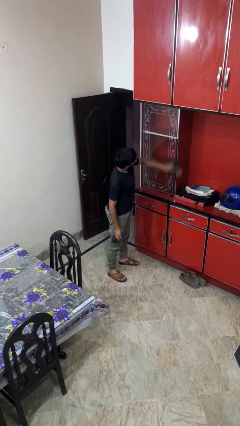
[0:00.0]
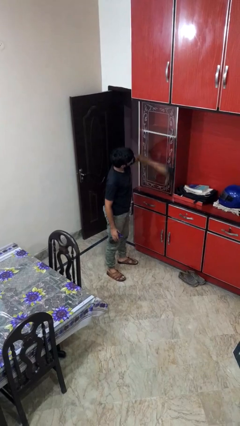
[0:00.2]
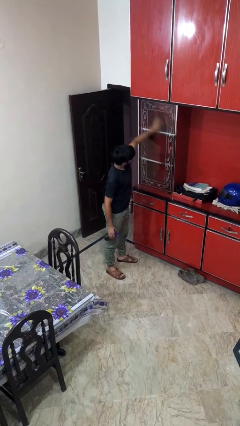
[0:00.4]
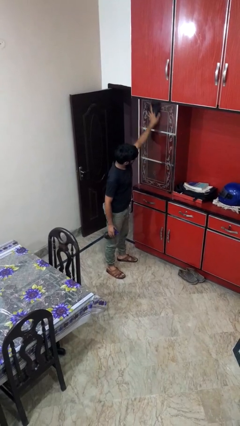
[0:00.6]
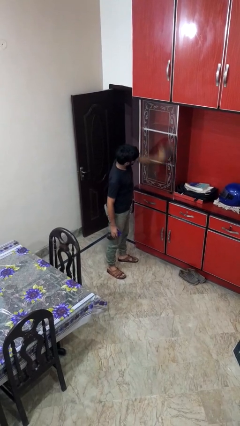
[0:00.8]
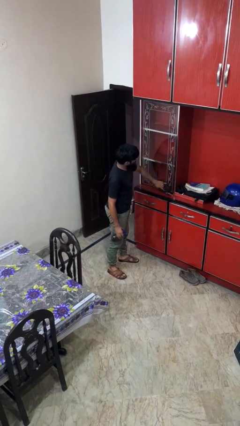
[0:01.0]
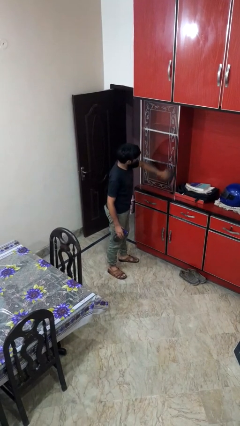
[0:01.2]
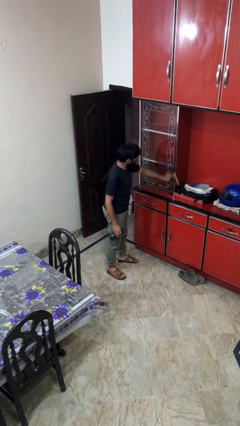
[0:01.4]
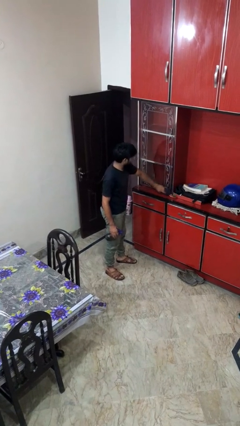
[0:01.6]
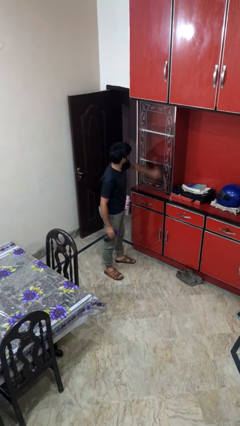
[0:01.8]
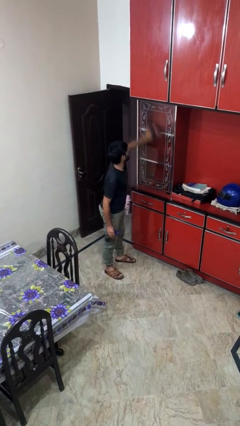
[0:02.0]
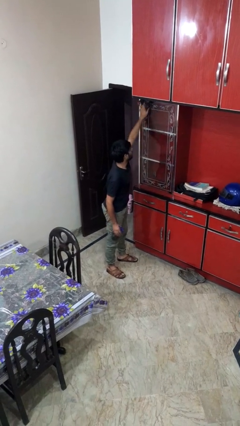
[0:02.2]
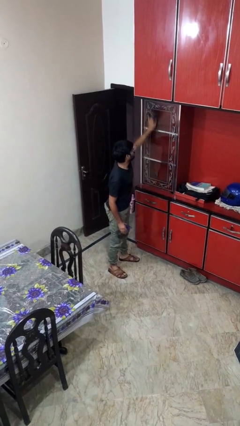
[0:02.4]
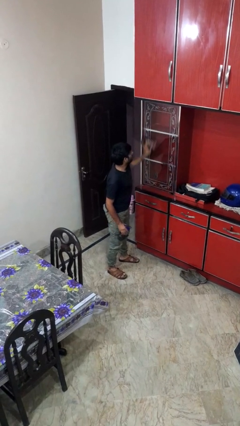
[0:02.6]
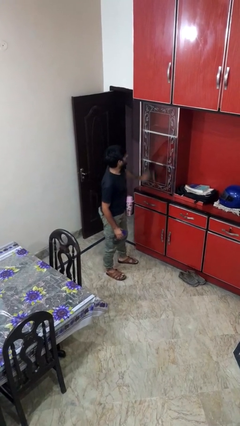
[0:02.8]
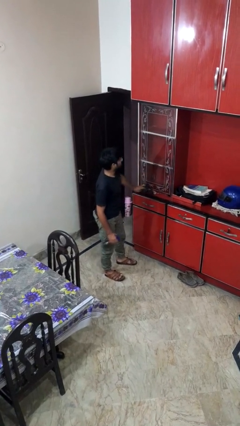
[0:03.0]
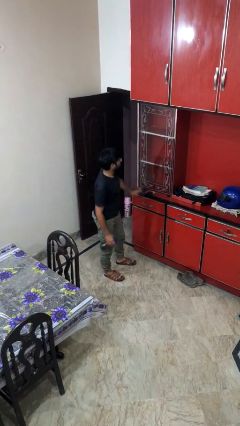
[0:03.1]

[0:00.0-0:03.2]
person washes window

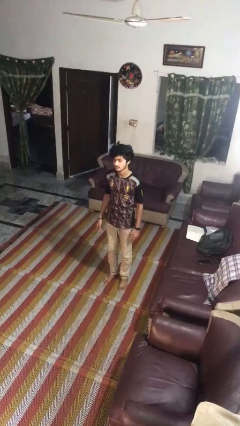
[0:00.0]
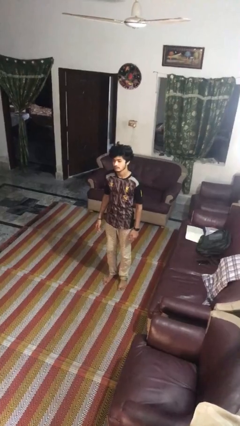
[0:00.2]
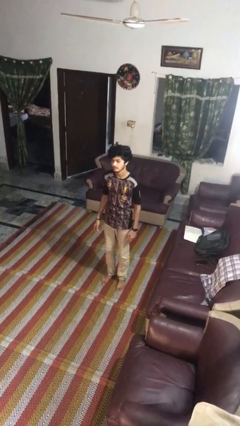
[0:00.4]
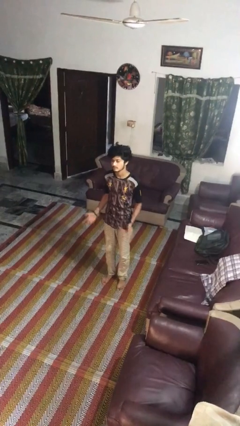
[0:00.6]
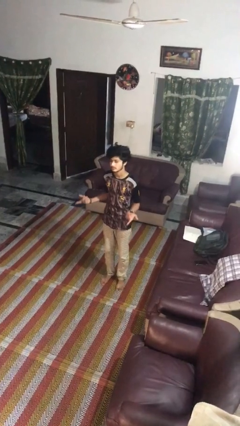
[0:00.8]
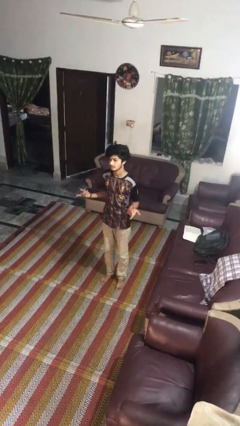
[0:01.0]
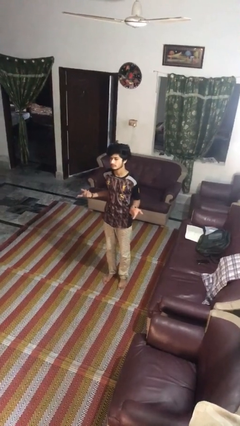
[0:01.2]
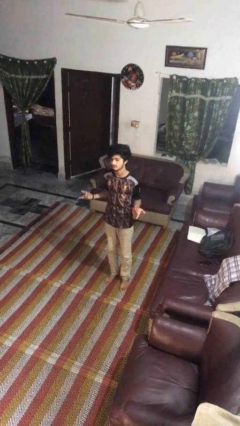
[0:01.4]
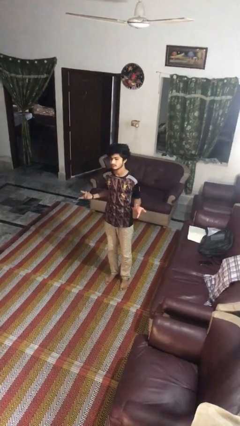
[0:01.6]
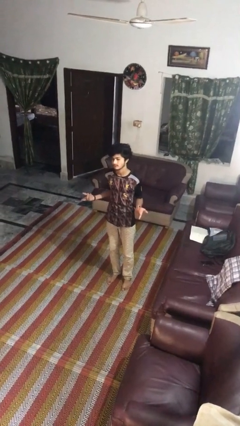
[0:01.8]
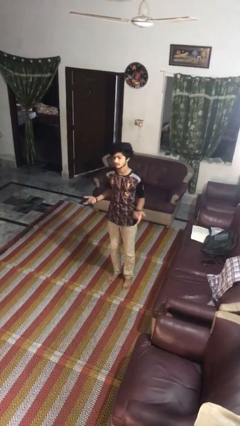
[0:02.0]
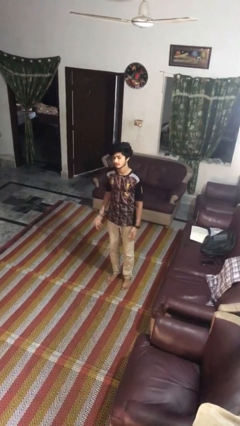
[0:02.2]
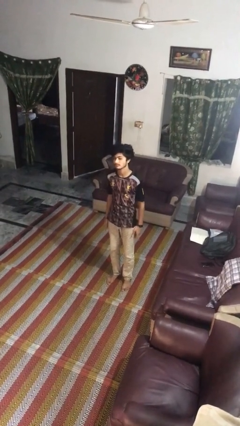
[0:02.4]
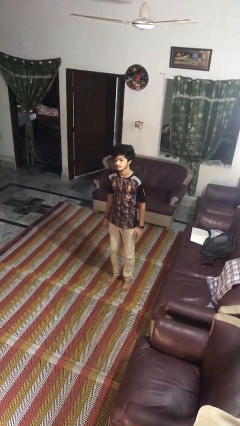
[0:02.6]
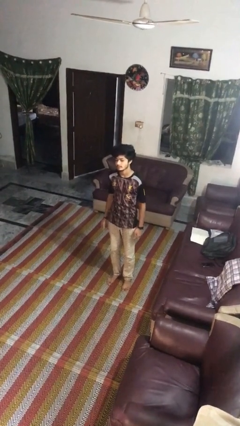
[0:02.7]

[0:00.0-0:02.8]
person shrugs

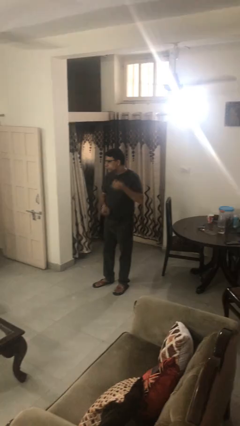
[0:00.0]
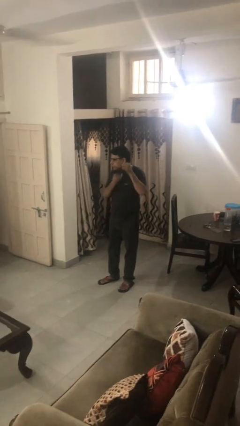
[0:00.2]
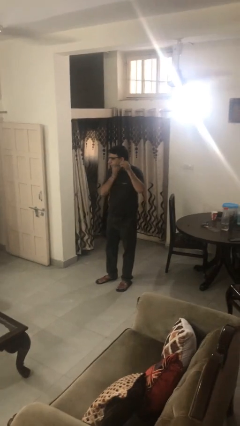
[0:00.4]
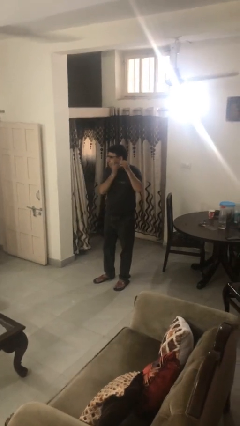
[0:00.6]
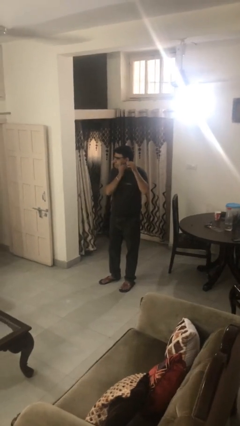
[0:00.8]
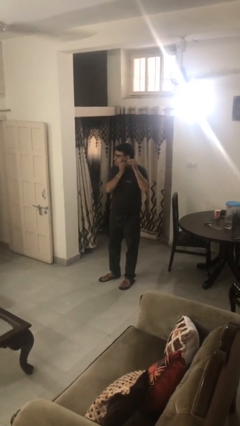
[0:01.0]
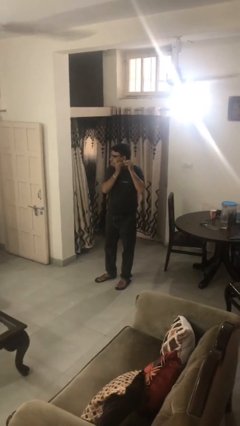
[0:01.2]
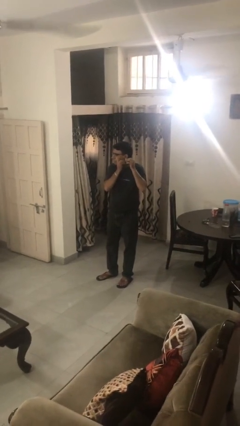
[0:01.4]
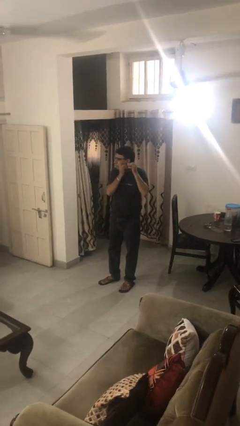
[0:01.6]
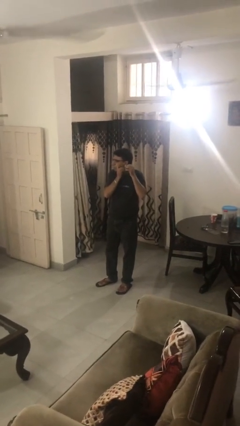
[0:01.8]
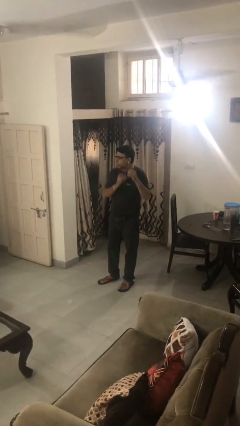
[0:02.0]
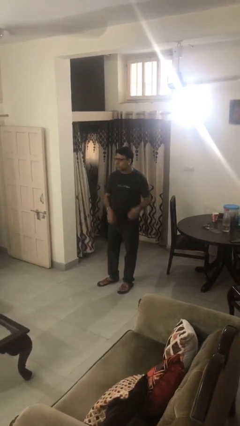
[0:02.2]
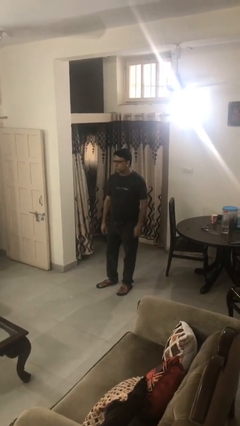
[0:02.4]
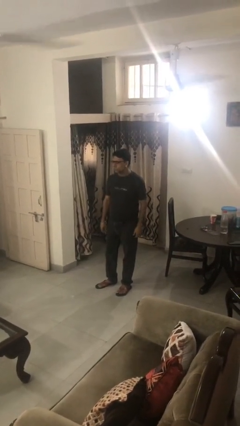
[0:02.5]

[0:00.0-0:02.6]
person puts on earrings

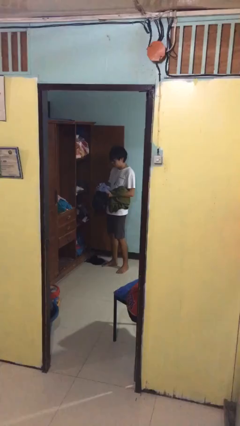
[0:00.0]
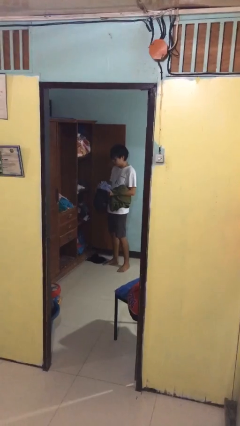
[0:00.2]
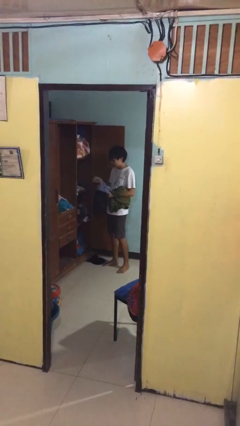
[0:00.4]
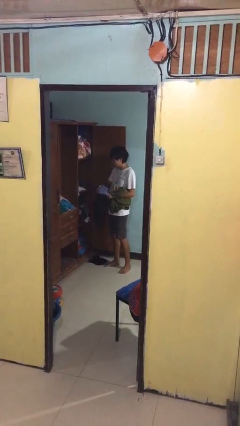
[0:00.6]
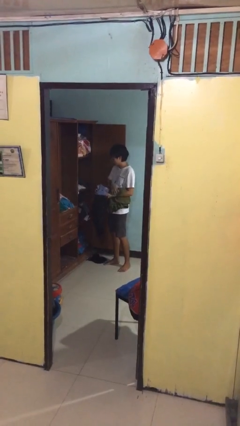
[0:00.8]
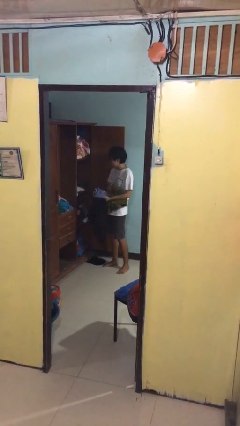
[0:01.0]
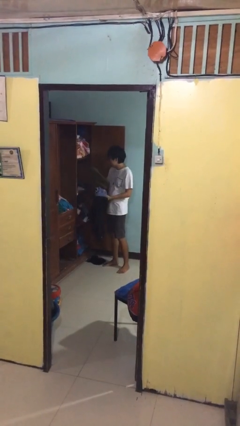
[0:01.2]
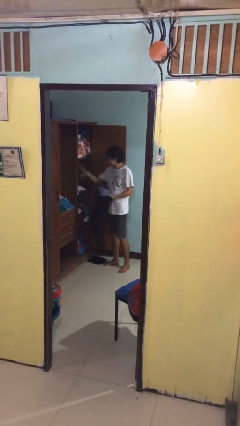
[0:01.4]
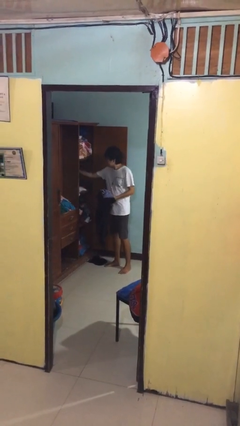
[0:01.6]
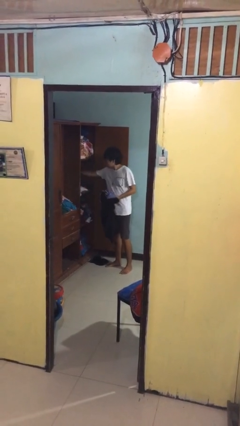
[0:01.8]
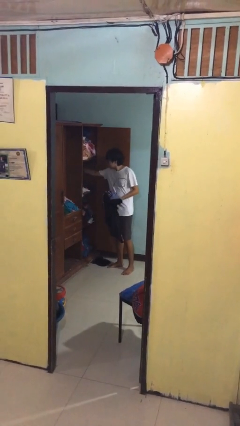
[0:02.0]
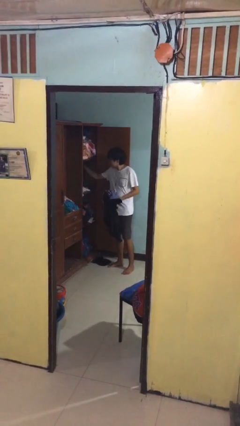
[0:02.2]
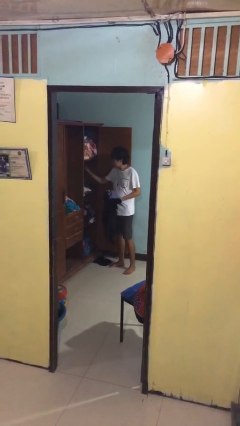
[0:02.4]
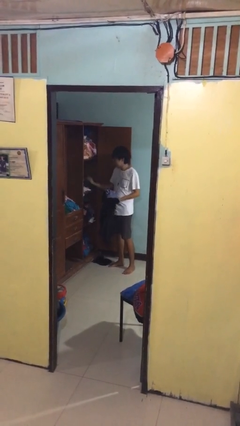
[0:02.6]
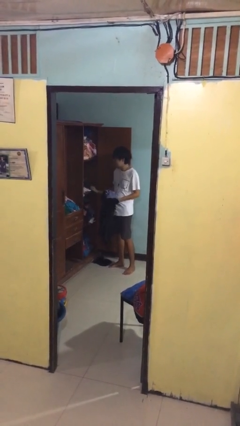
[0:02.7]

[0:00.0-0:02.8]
person puts clothes into dresser

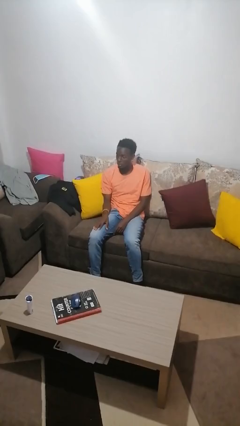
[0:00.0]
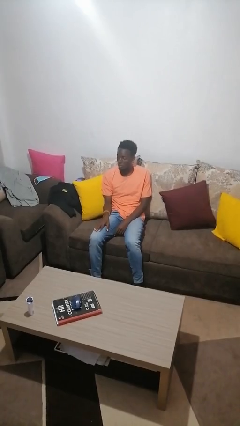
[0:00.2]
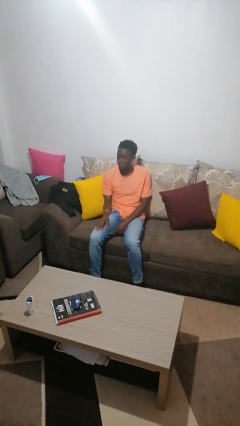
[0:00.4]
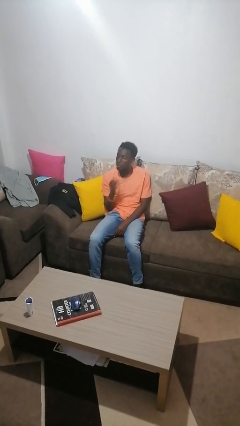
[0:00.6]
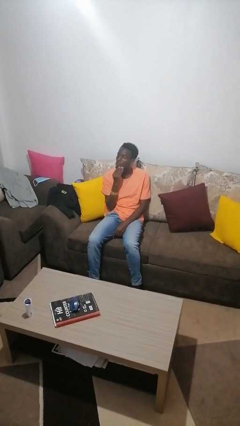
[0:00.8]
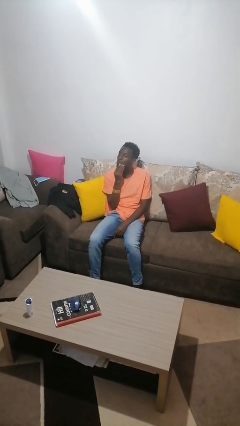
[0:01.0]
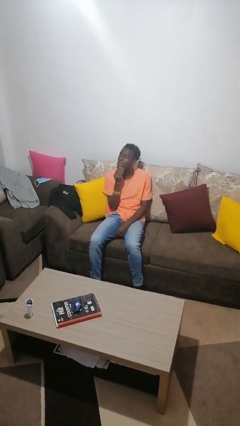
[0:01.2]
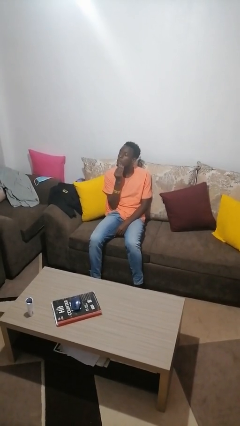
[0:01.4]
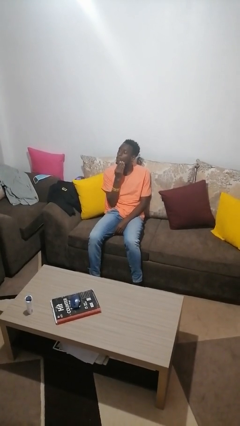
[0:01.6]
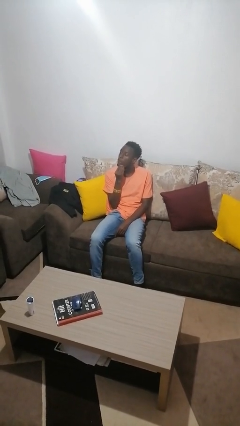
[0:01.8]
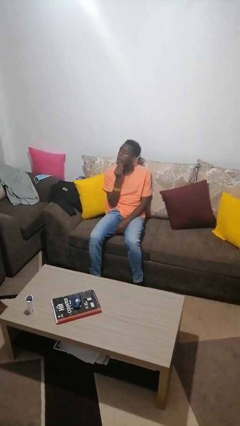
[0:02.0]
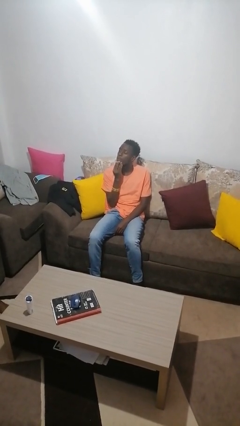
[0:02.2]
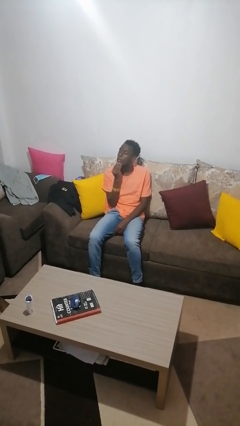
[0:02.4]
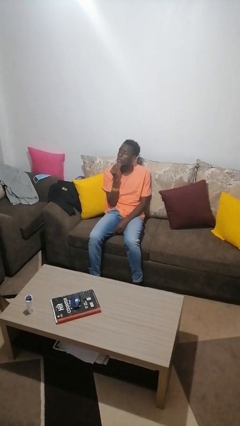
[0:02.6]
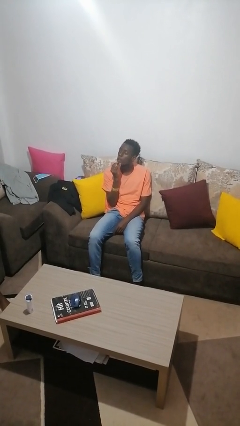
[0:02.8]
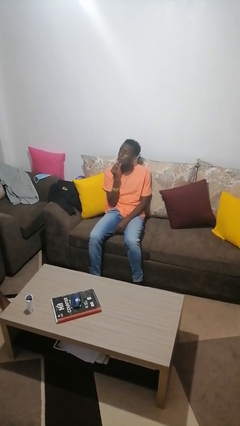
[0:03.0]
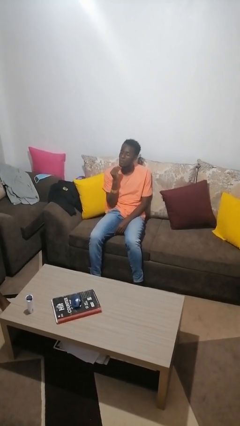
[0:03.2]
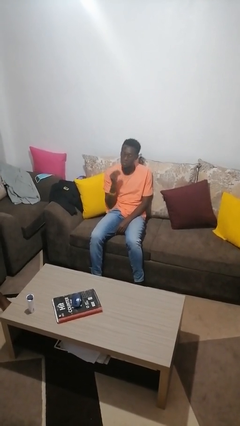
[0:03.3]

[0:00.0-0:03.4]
person strokes chin

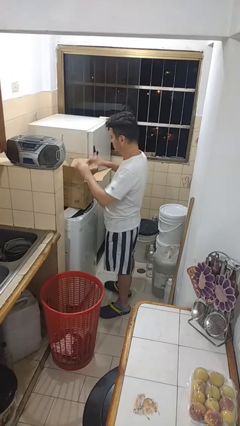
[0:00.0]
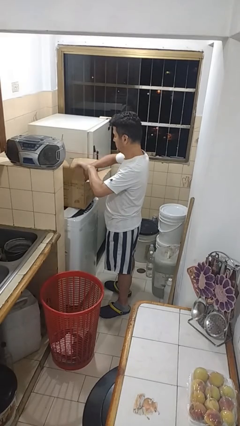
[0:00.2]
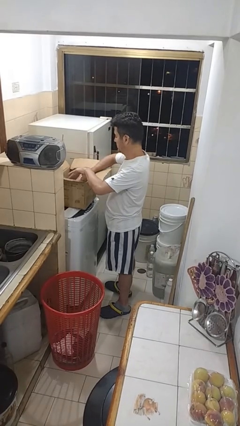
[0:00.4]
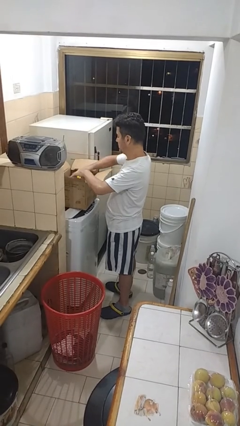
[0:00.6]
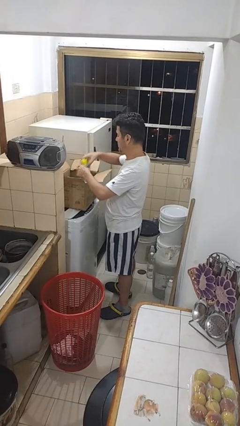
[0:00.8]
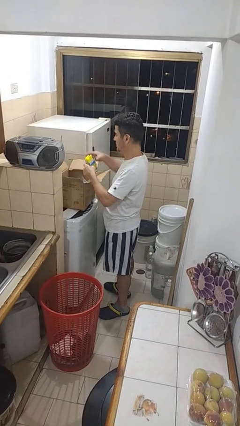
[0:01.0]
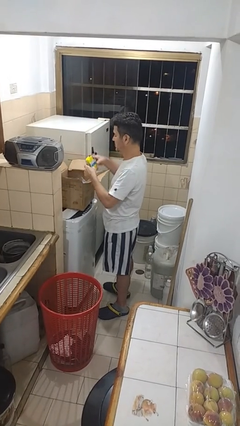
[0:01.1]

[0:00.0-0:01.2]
person takes object from box

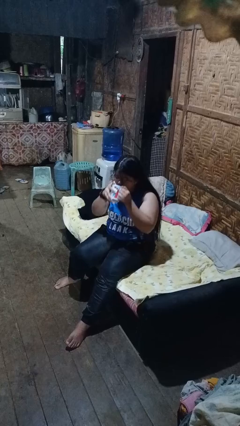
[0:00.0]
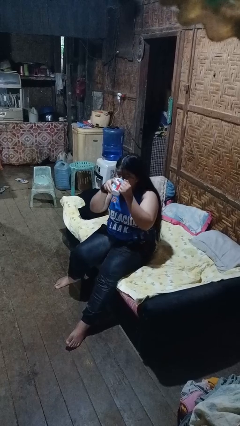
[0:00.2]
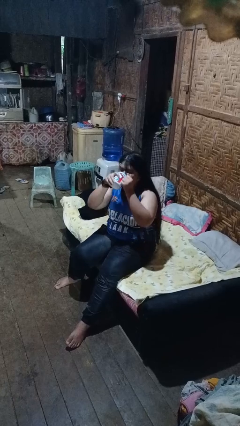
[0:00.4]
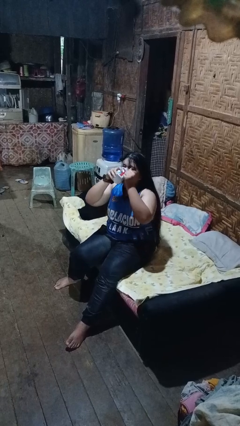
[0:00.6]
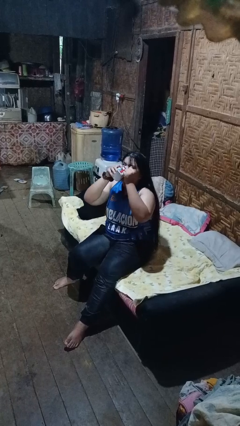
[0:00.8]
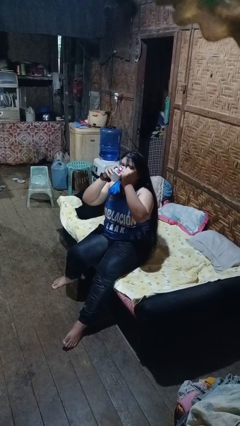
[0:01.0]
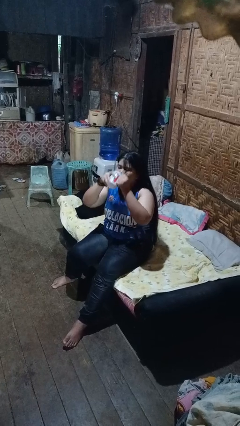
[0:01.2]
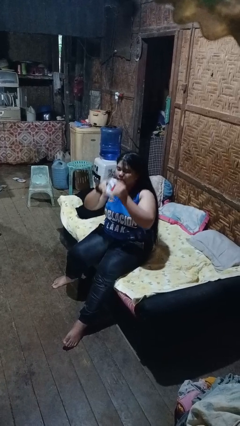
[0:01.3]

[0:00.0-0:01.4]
person drinks from mug
